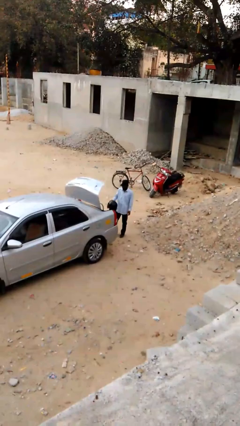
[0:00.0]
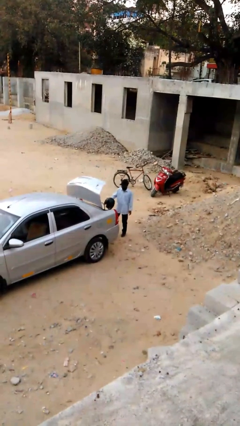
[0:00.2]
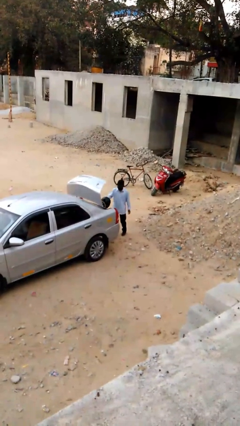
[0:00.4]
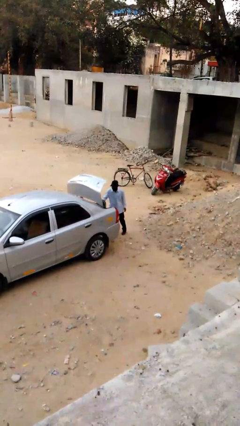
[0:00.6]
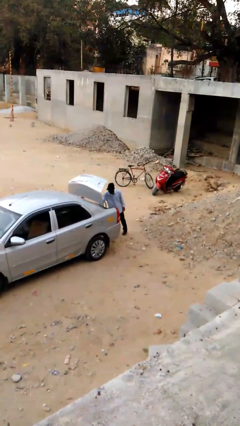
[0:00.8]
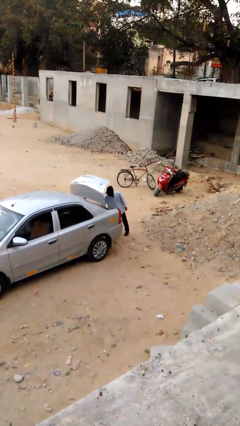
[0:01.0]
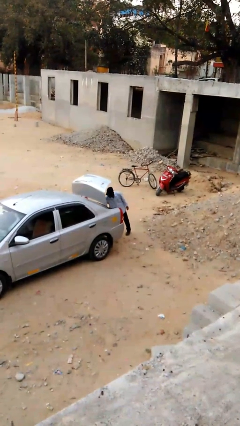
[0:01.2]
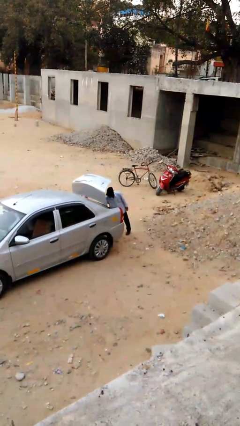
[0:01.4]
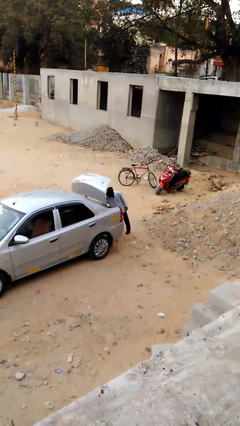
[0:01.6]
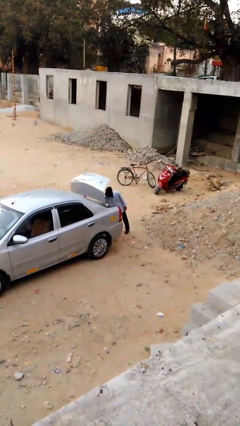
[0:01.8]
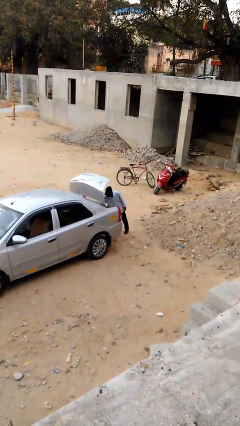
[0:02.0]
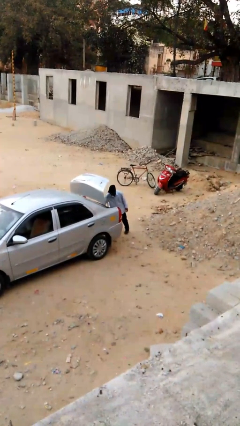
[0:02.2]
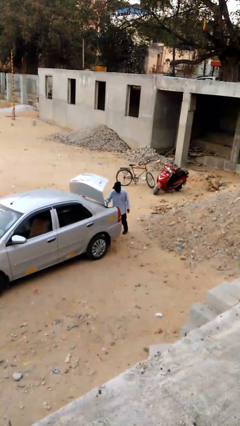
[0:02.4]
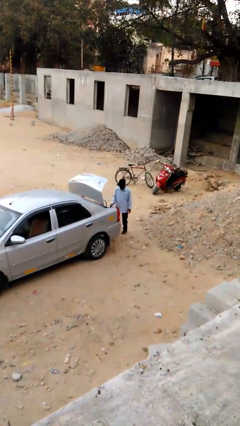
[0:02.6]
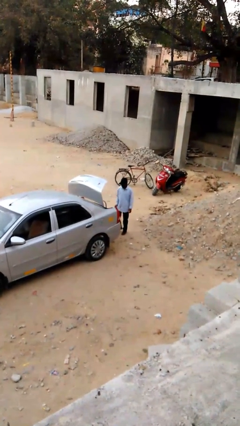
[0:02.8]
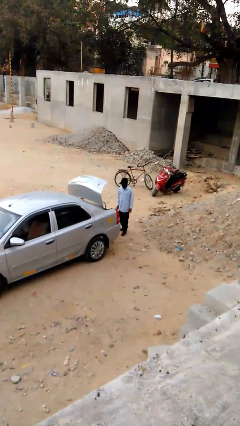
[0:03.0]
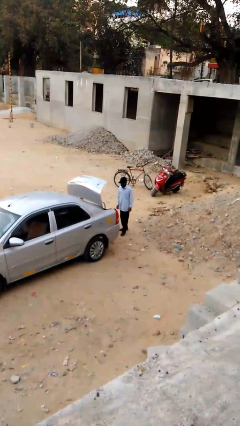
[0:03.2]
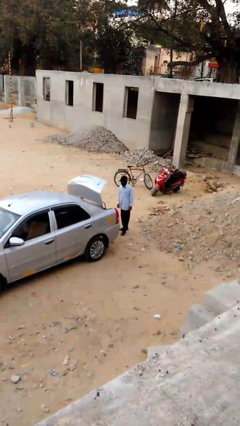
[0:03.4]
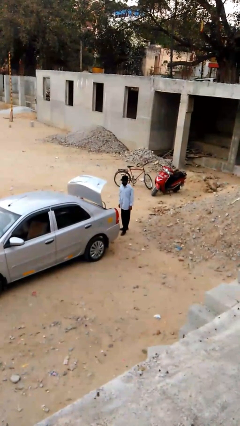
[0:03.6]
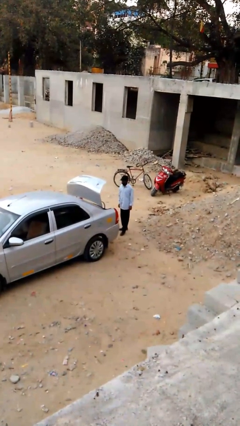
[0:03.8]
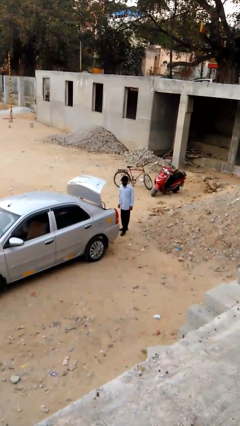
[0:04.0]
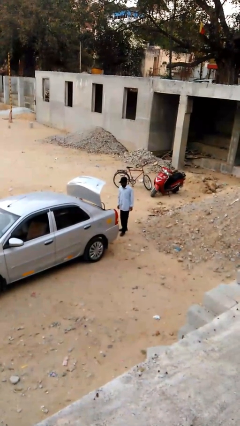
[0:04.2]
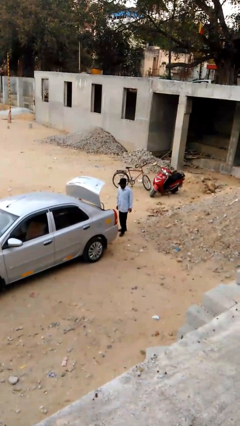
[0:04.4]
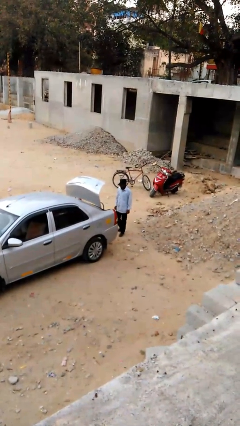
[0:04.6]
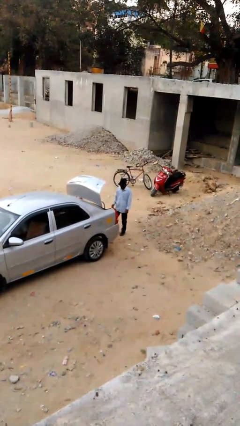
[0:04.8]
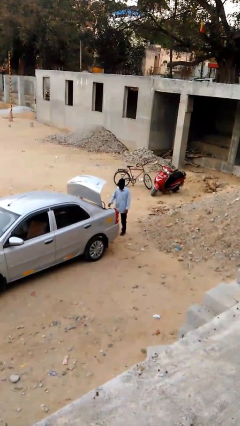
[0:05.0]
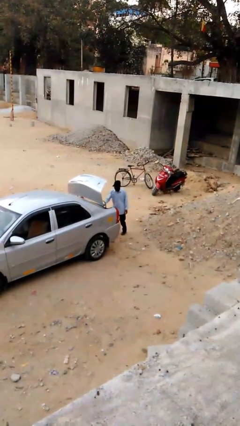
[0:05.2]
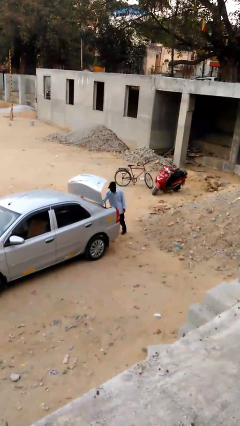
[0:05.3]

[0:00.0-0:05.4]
person loads car

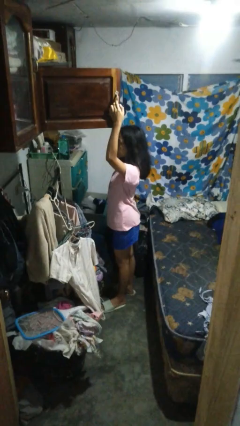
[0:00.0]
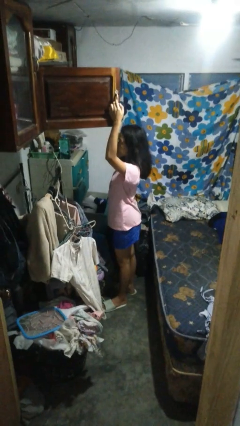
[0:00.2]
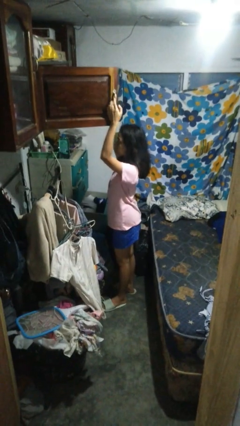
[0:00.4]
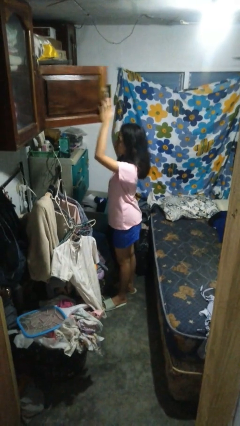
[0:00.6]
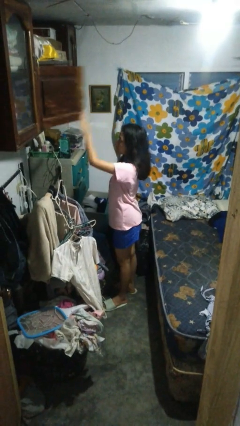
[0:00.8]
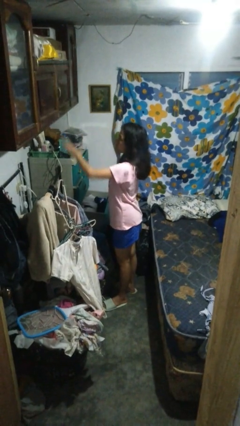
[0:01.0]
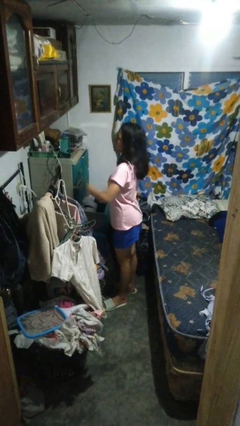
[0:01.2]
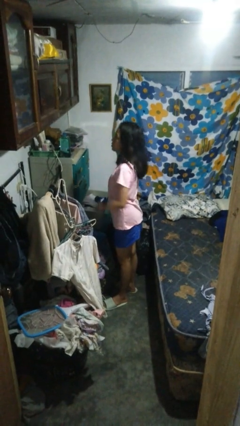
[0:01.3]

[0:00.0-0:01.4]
person closes closet door

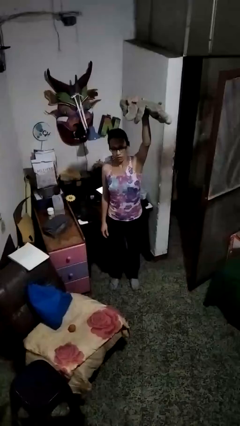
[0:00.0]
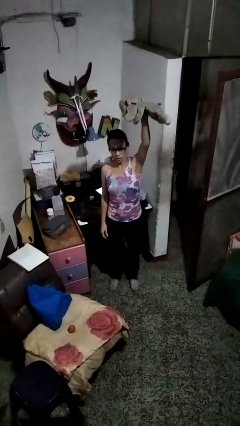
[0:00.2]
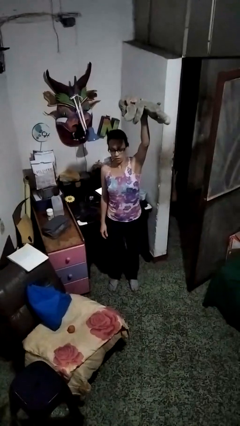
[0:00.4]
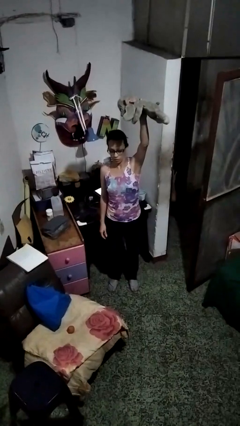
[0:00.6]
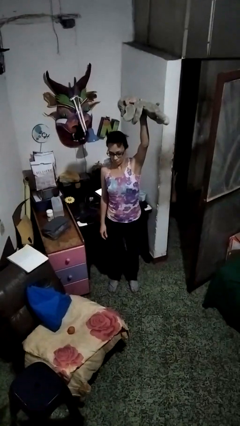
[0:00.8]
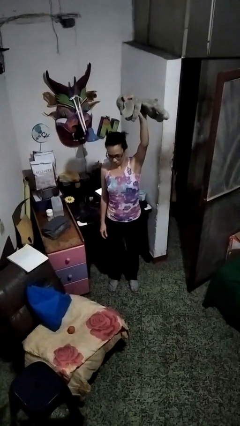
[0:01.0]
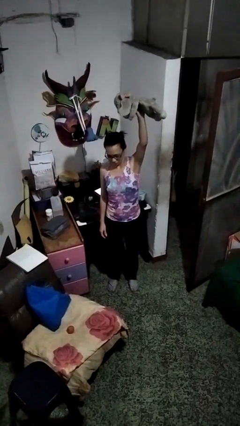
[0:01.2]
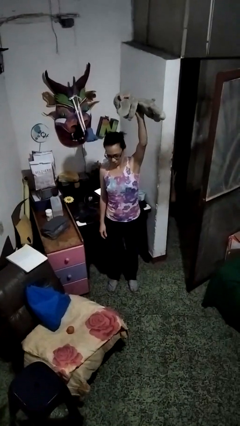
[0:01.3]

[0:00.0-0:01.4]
person drops object

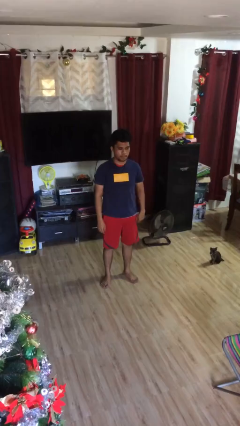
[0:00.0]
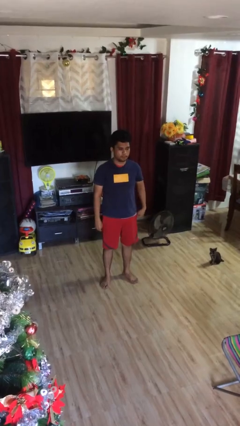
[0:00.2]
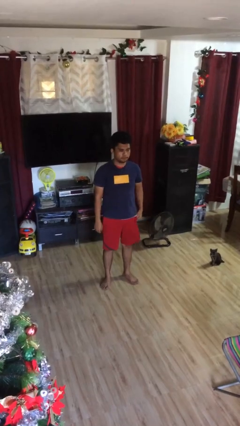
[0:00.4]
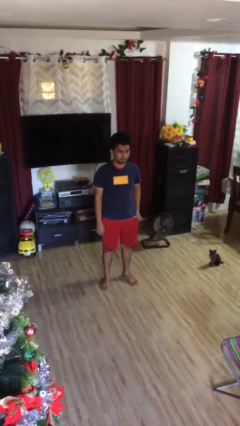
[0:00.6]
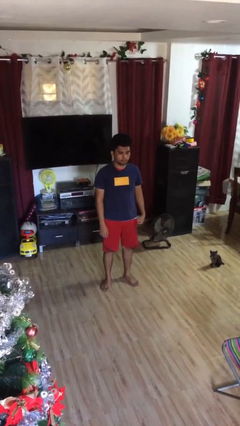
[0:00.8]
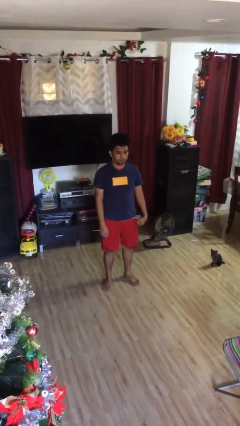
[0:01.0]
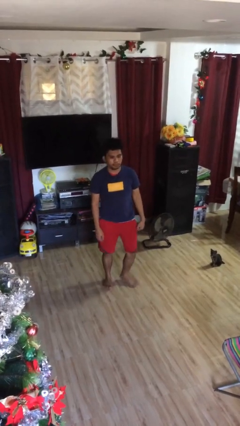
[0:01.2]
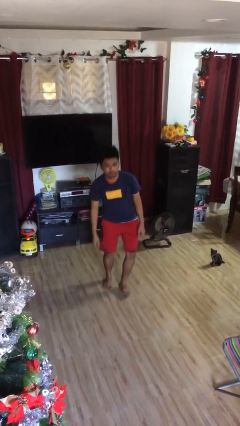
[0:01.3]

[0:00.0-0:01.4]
person stands up

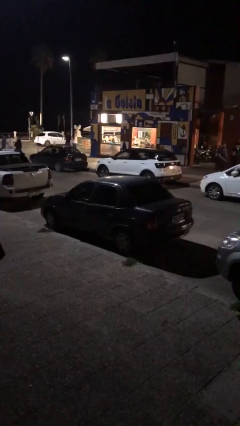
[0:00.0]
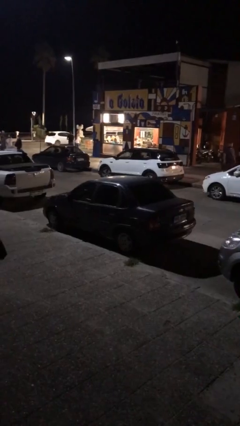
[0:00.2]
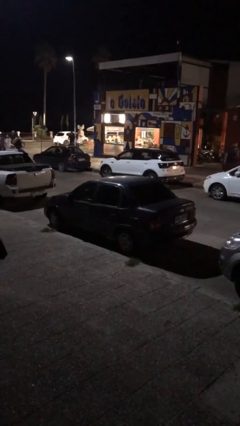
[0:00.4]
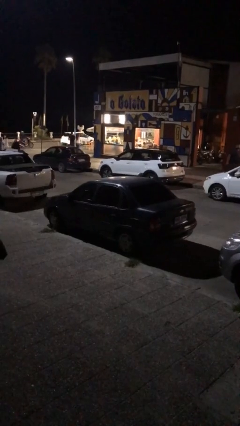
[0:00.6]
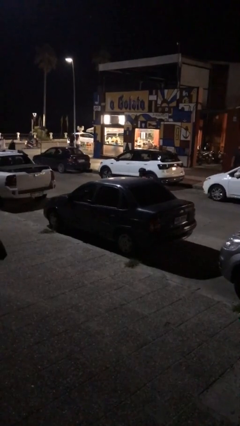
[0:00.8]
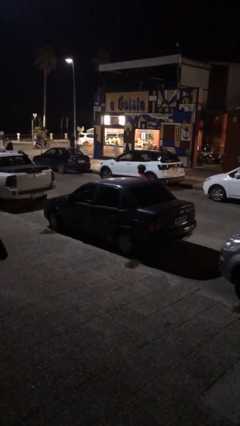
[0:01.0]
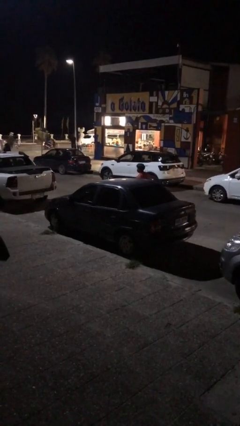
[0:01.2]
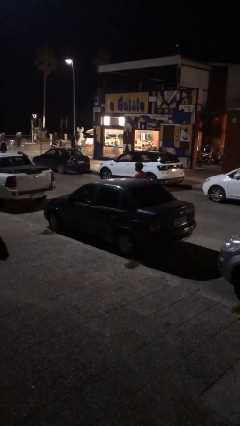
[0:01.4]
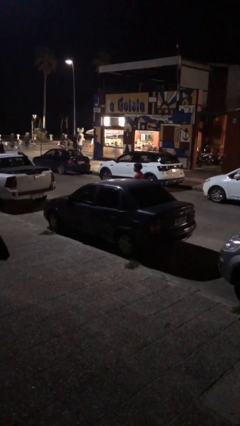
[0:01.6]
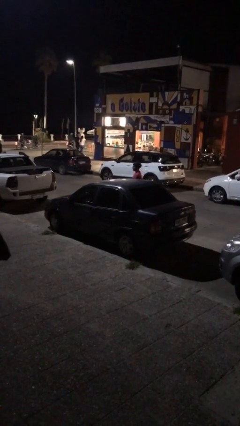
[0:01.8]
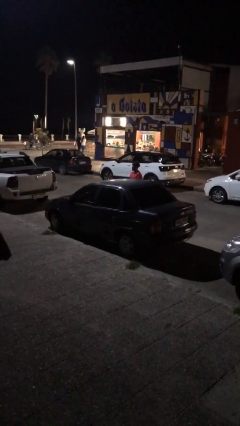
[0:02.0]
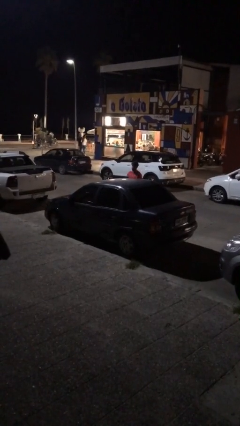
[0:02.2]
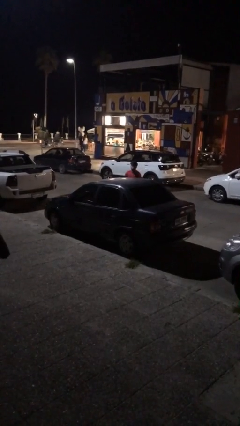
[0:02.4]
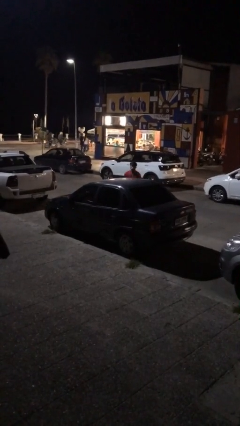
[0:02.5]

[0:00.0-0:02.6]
car drops off person

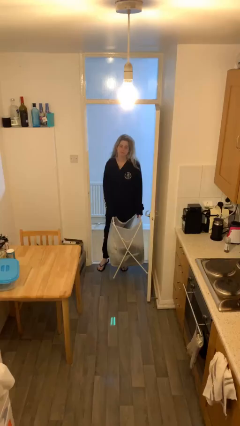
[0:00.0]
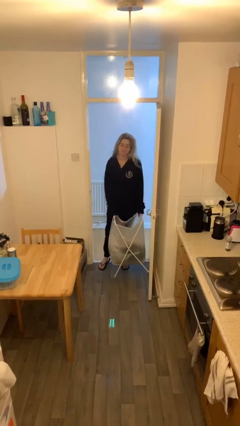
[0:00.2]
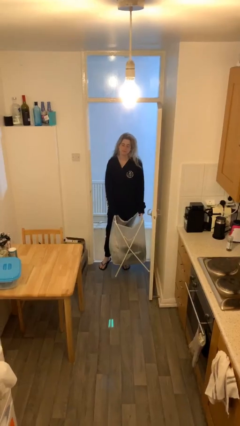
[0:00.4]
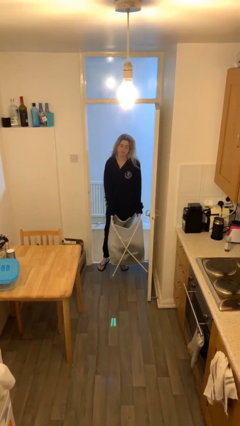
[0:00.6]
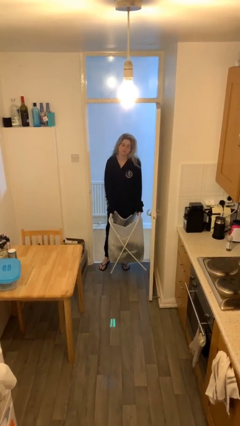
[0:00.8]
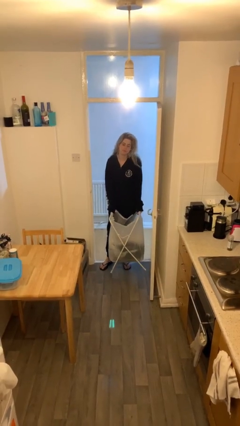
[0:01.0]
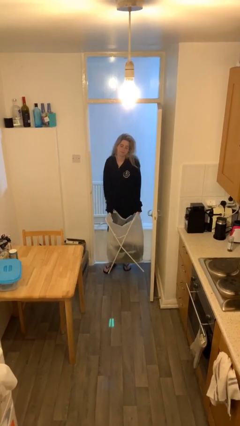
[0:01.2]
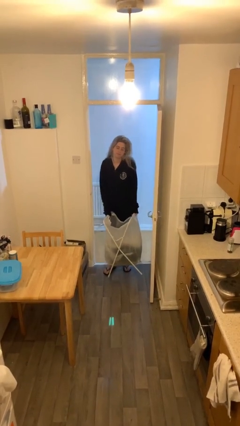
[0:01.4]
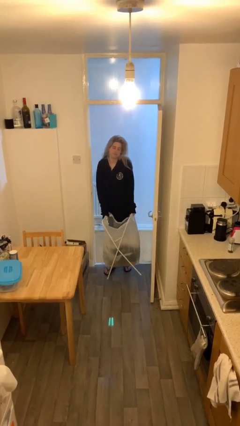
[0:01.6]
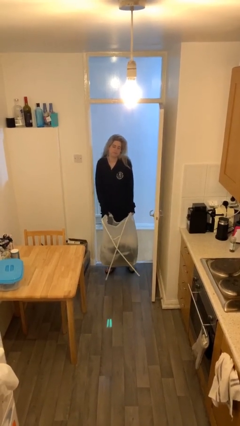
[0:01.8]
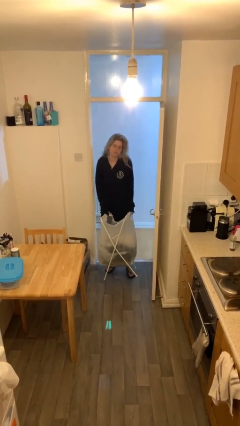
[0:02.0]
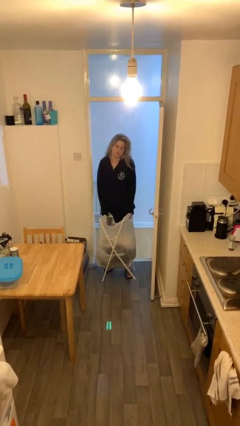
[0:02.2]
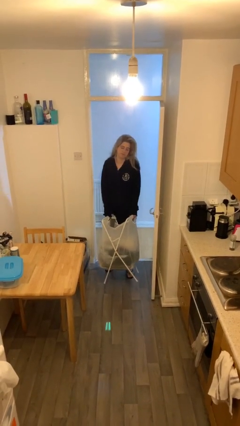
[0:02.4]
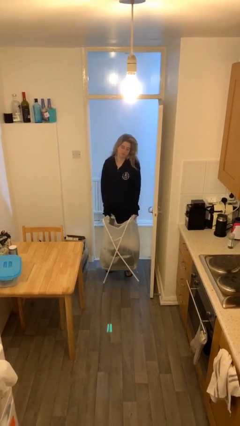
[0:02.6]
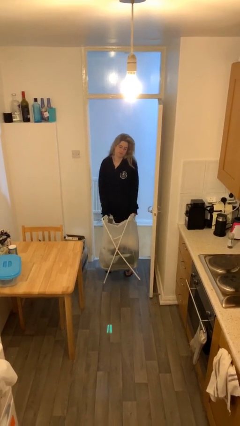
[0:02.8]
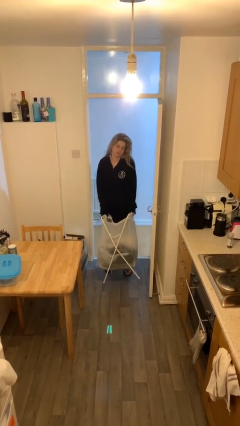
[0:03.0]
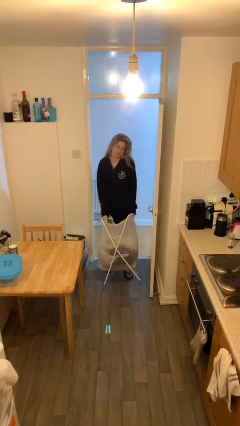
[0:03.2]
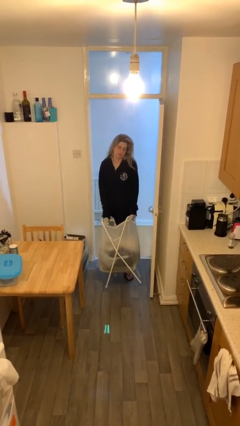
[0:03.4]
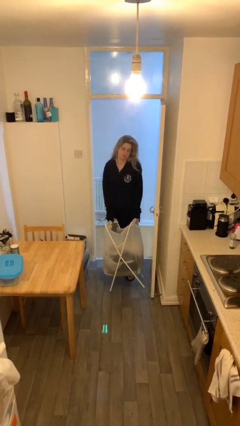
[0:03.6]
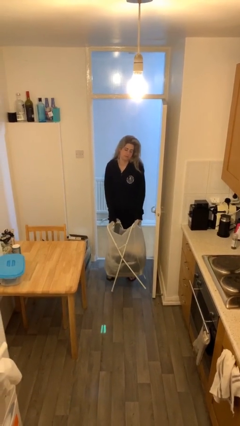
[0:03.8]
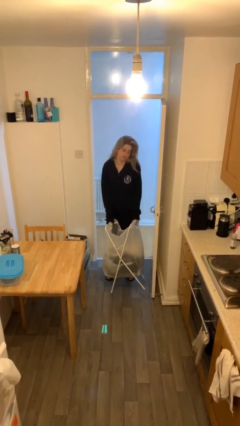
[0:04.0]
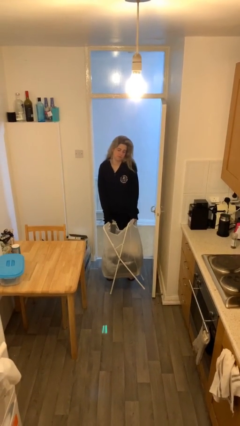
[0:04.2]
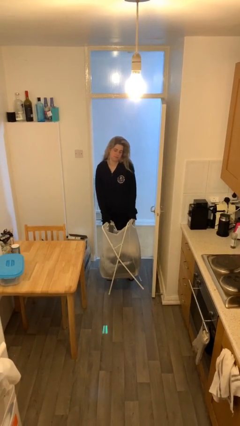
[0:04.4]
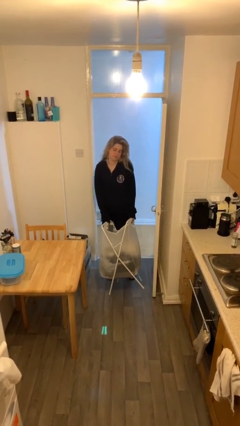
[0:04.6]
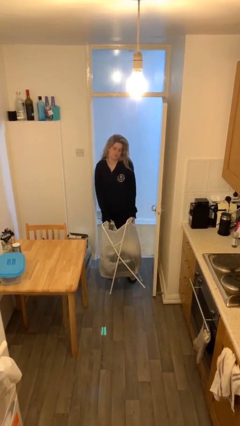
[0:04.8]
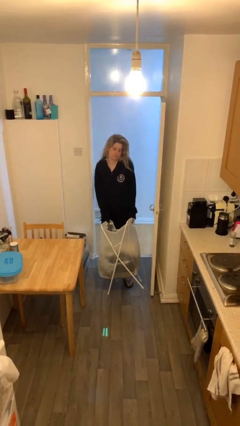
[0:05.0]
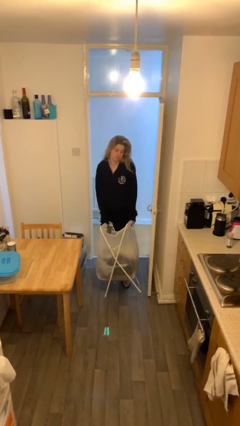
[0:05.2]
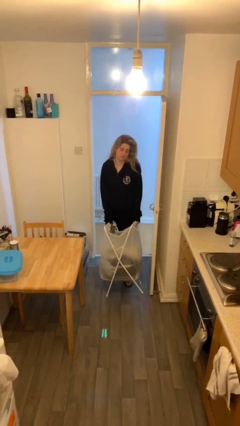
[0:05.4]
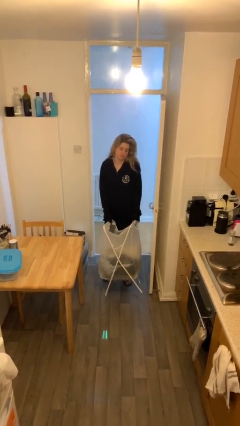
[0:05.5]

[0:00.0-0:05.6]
person carries heavy object
